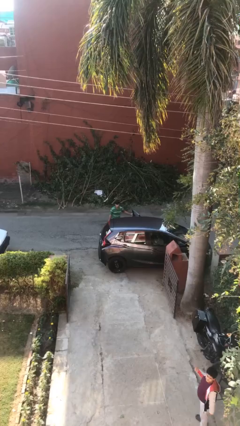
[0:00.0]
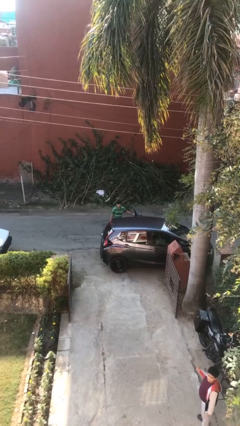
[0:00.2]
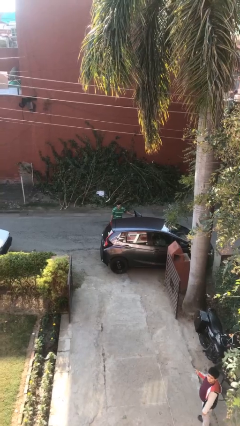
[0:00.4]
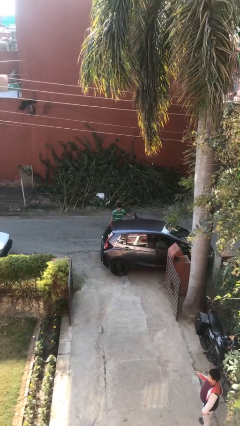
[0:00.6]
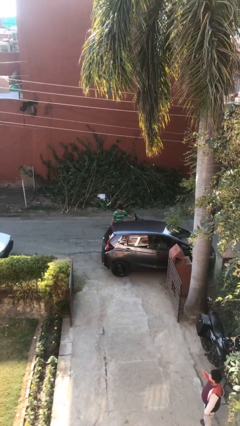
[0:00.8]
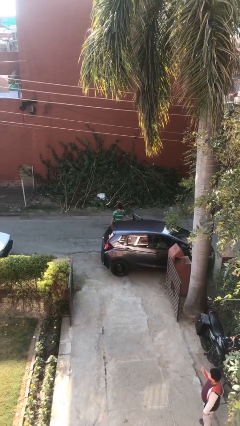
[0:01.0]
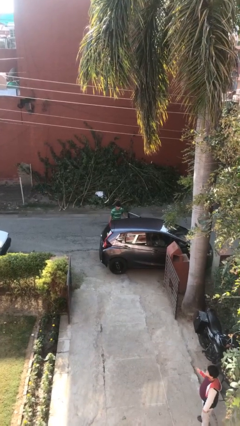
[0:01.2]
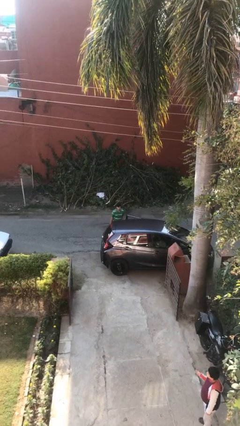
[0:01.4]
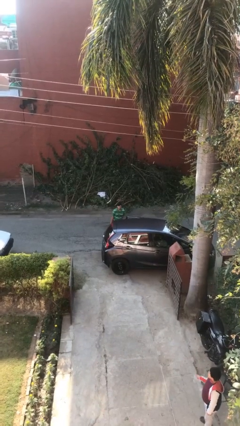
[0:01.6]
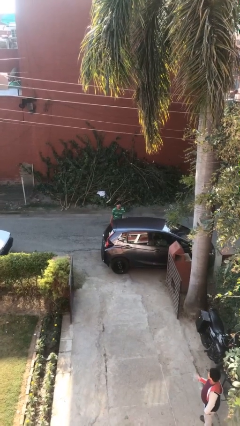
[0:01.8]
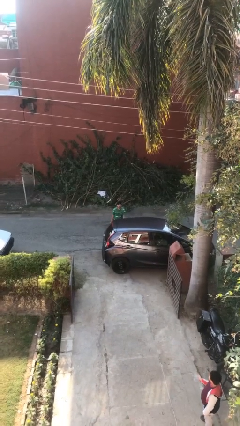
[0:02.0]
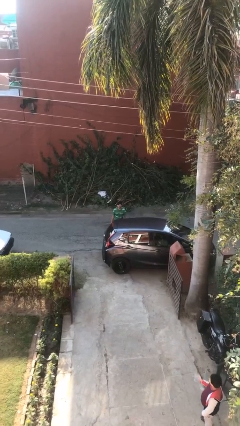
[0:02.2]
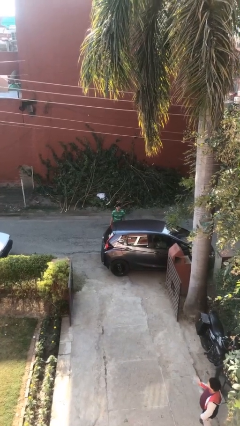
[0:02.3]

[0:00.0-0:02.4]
person closes car door

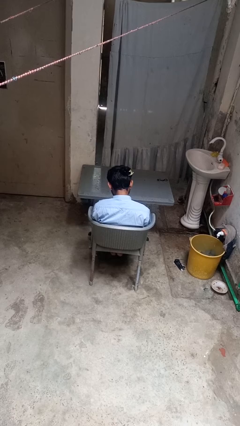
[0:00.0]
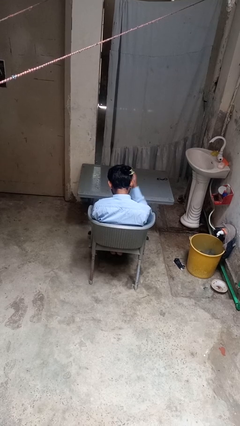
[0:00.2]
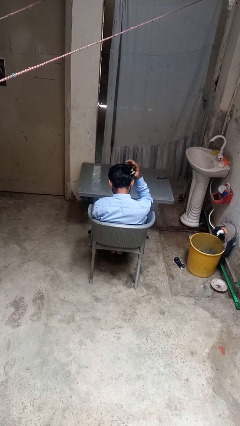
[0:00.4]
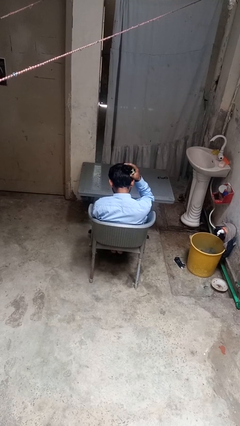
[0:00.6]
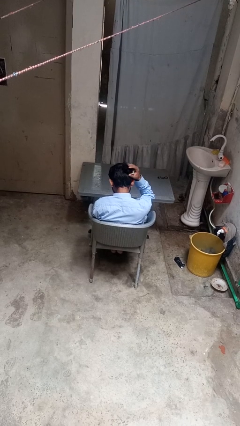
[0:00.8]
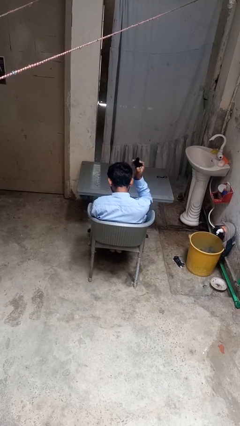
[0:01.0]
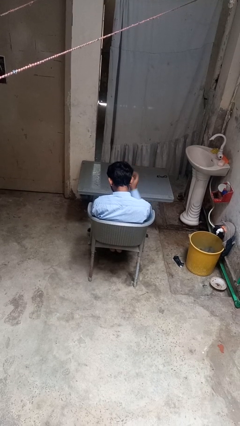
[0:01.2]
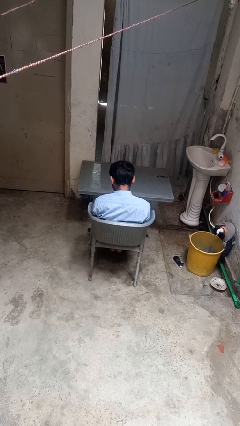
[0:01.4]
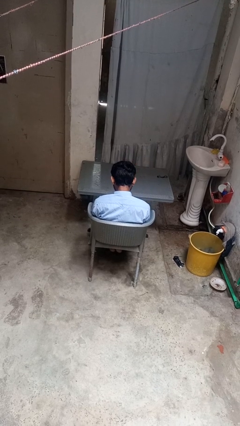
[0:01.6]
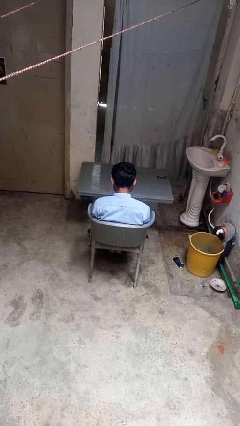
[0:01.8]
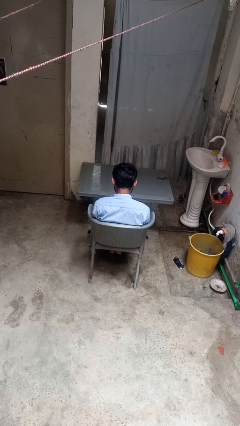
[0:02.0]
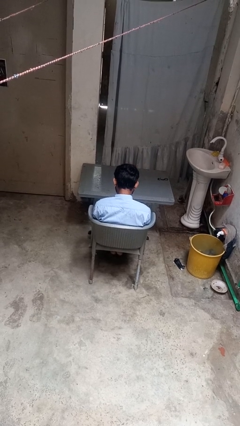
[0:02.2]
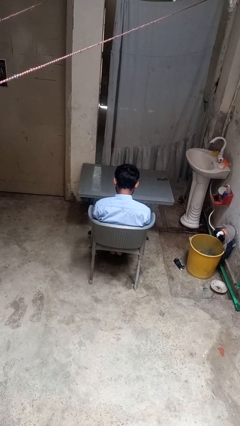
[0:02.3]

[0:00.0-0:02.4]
person takes off hairtie

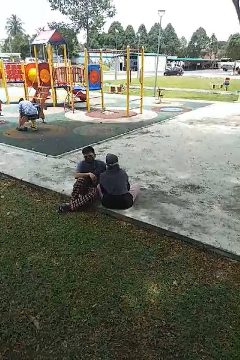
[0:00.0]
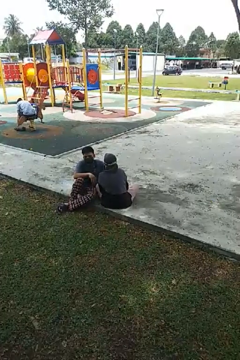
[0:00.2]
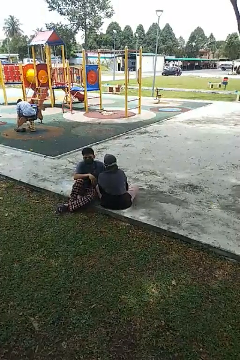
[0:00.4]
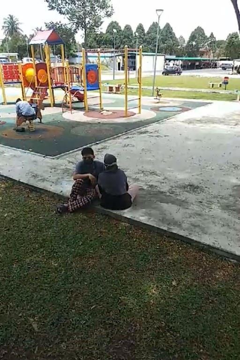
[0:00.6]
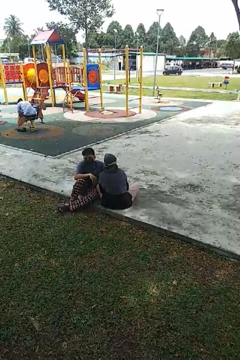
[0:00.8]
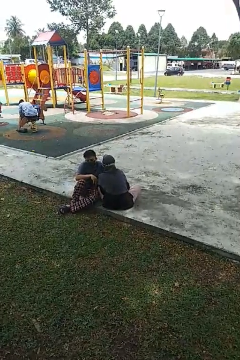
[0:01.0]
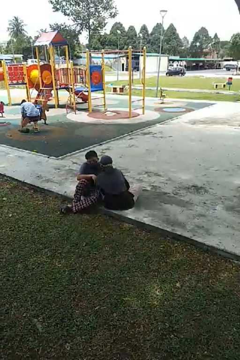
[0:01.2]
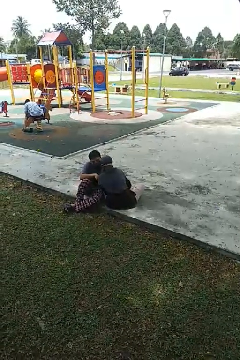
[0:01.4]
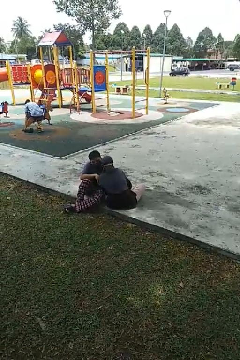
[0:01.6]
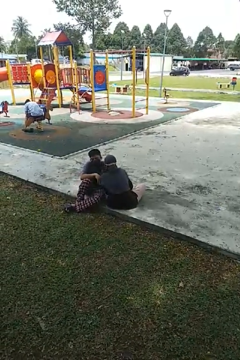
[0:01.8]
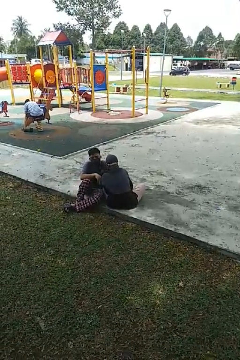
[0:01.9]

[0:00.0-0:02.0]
person kisses cheek of person

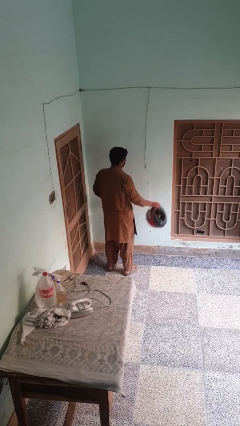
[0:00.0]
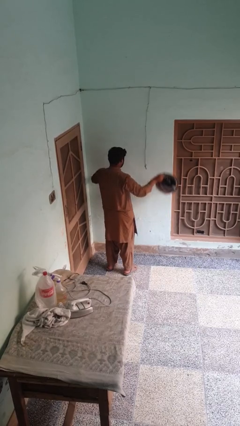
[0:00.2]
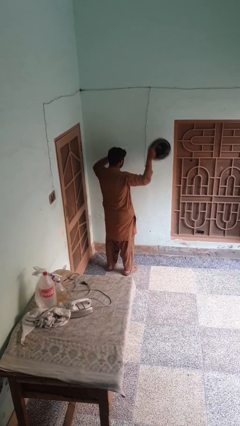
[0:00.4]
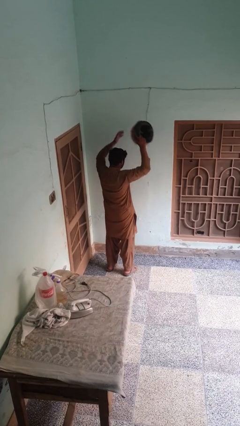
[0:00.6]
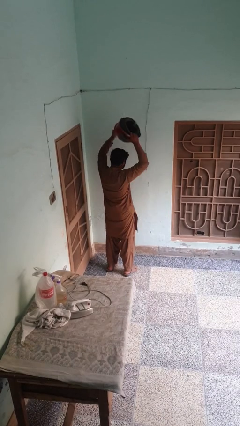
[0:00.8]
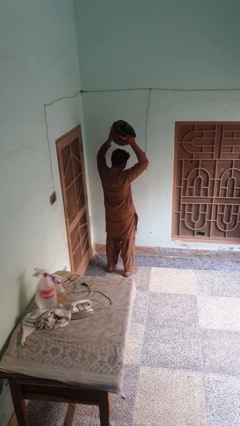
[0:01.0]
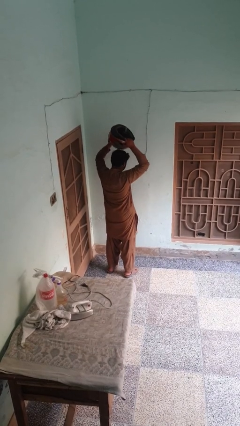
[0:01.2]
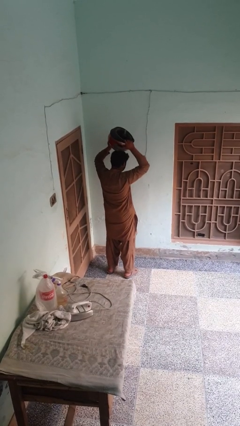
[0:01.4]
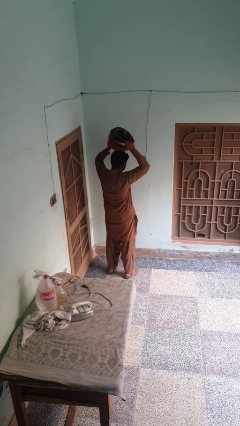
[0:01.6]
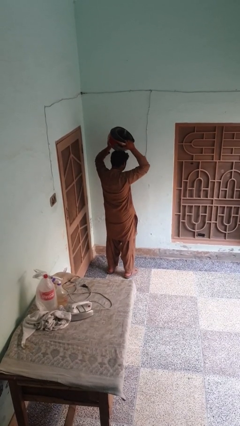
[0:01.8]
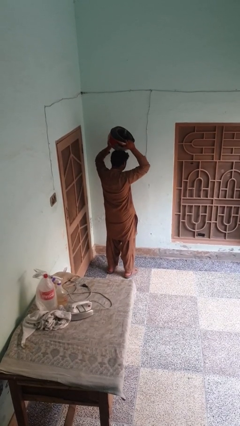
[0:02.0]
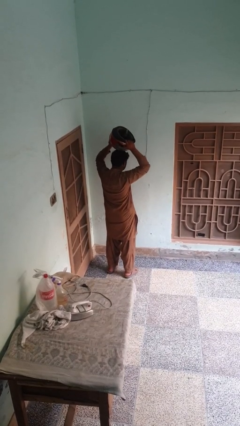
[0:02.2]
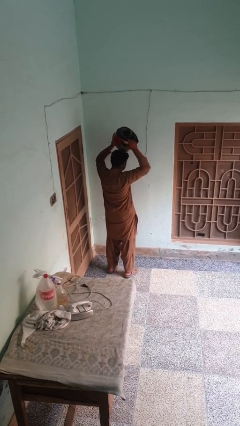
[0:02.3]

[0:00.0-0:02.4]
person holds object above head

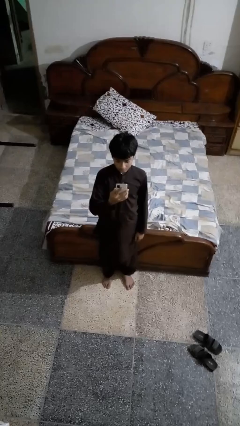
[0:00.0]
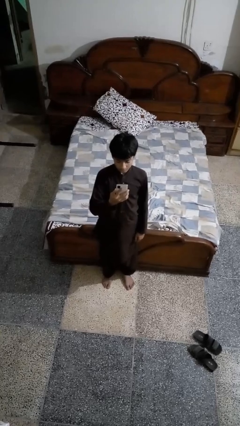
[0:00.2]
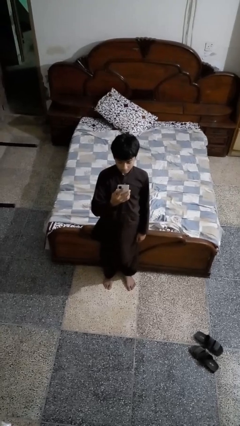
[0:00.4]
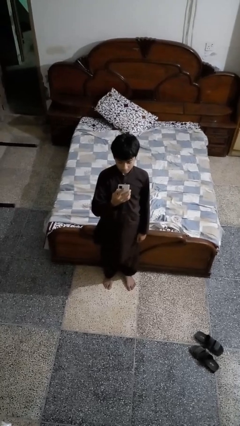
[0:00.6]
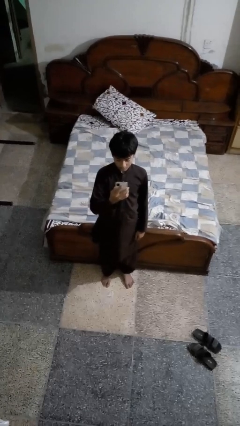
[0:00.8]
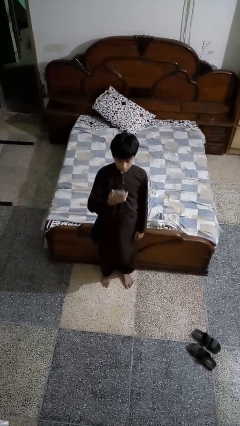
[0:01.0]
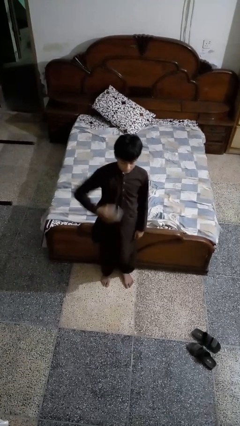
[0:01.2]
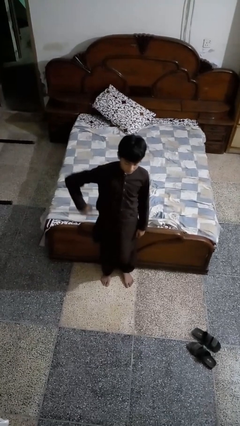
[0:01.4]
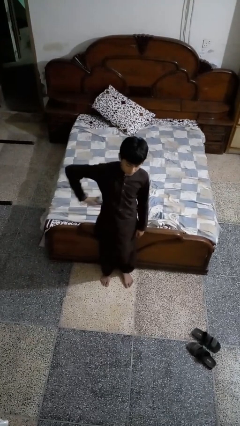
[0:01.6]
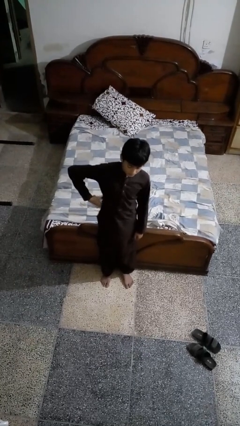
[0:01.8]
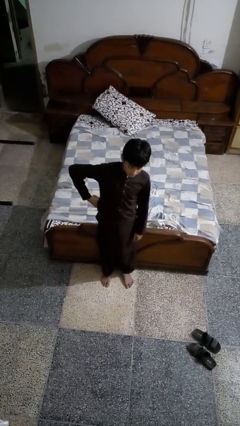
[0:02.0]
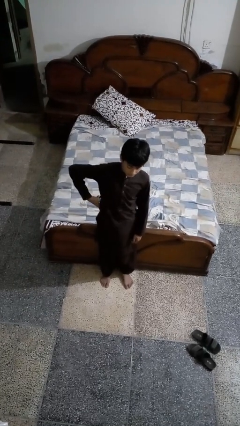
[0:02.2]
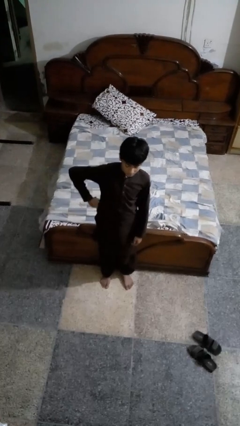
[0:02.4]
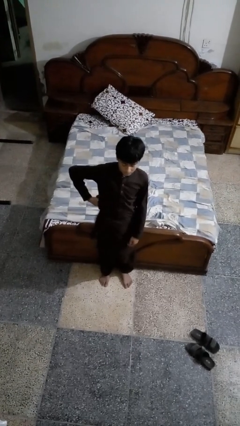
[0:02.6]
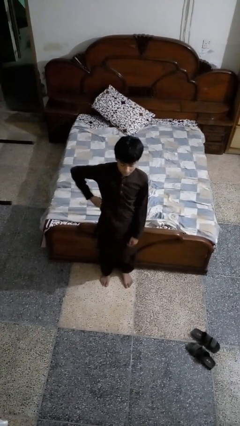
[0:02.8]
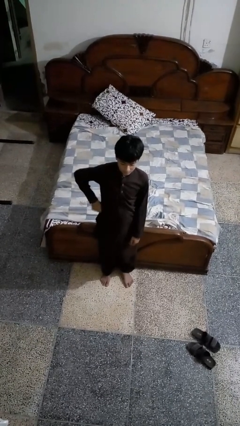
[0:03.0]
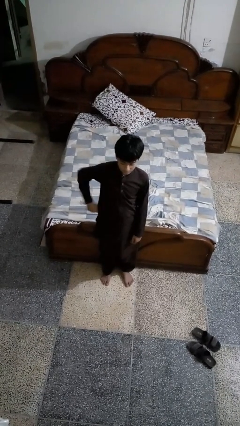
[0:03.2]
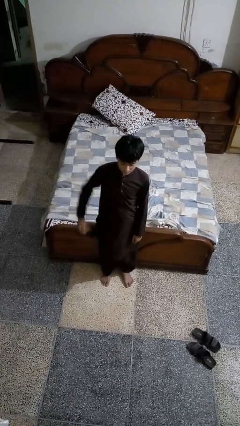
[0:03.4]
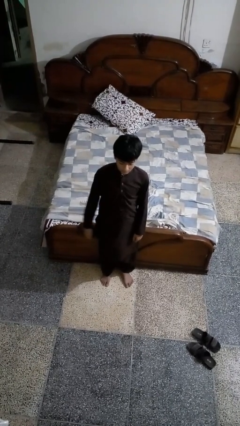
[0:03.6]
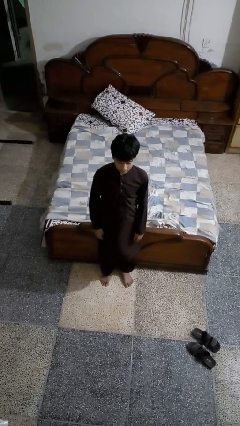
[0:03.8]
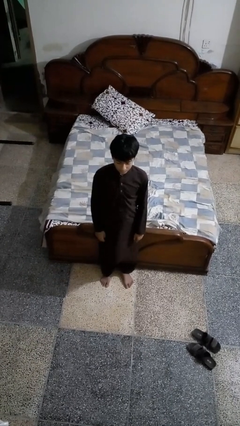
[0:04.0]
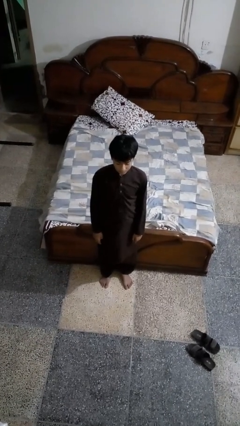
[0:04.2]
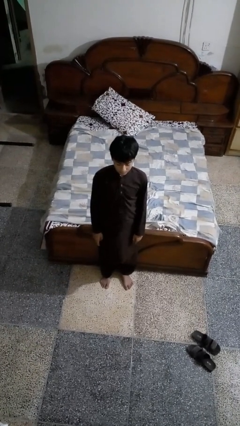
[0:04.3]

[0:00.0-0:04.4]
person puts phone into pocket

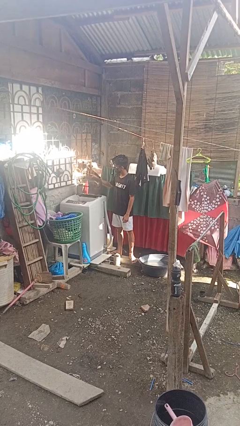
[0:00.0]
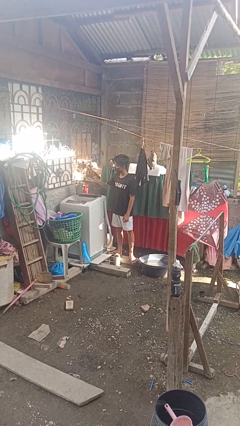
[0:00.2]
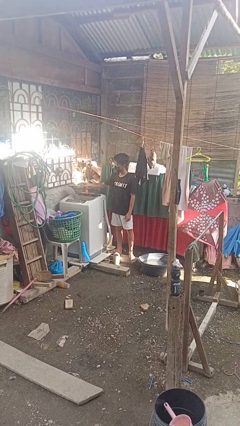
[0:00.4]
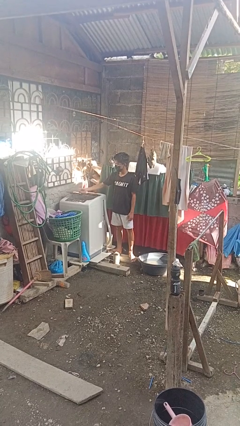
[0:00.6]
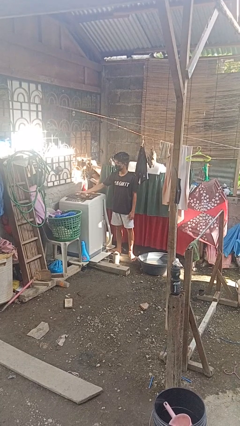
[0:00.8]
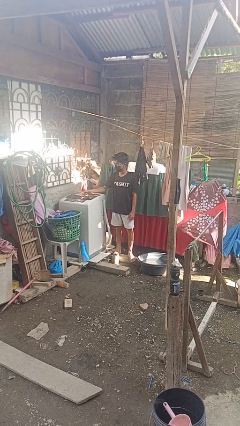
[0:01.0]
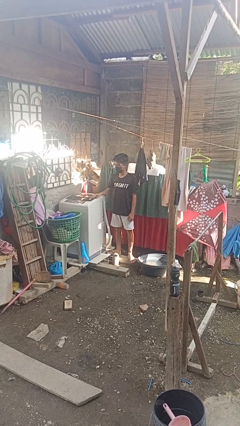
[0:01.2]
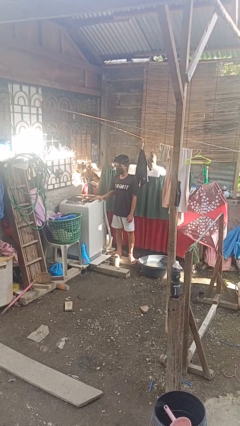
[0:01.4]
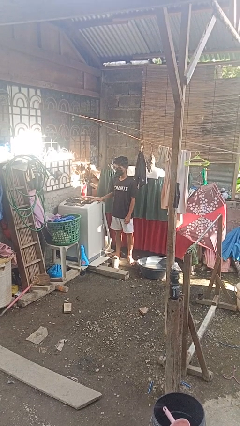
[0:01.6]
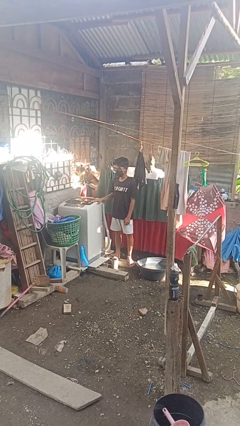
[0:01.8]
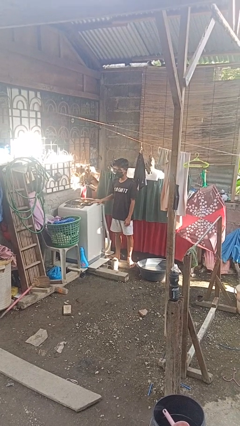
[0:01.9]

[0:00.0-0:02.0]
person closes clothes washer

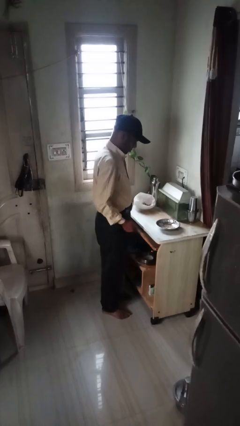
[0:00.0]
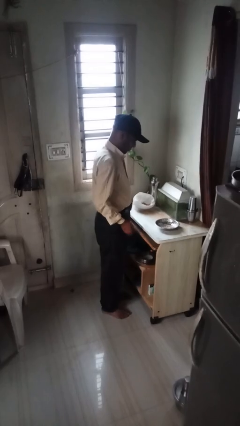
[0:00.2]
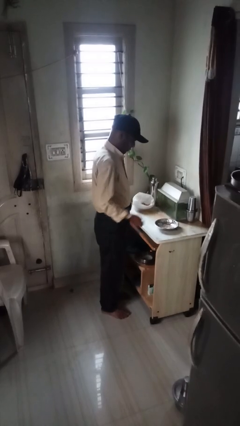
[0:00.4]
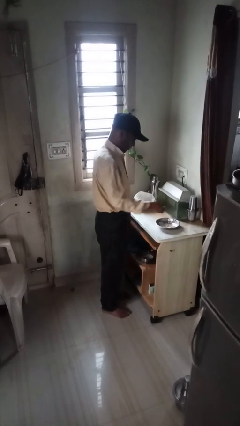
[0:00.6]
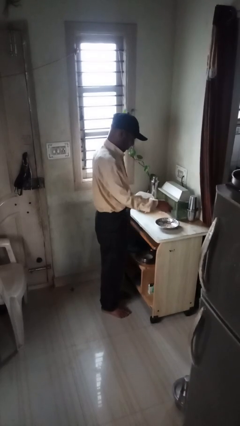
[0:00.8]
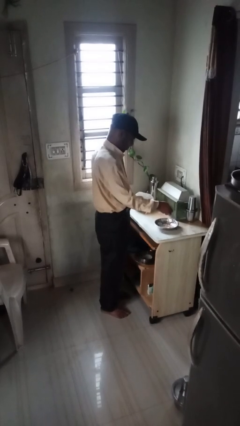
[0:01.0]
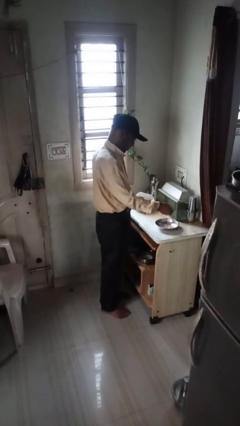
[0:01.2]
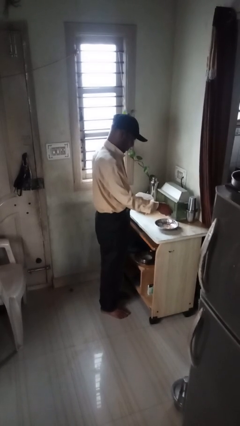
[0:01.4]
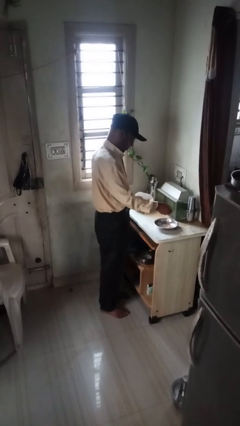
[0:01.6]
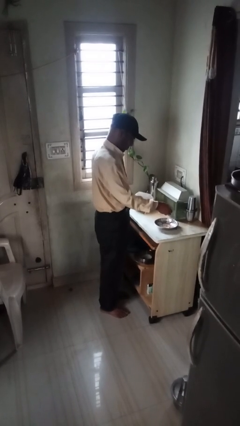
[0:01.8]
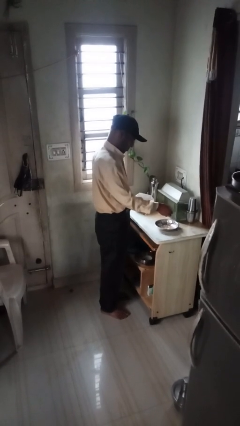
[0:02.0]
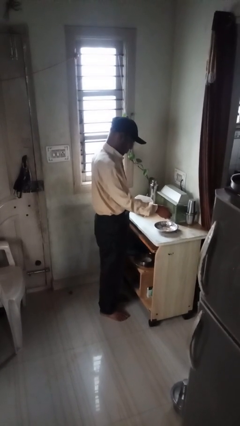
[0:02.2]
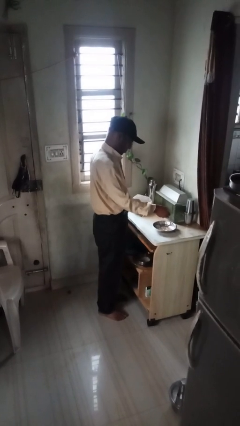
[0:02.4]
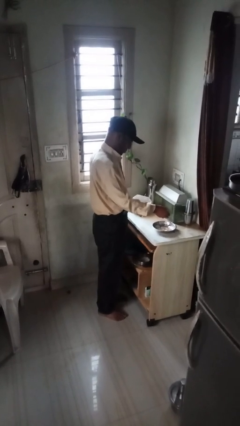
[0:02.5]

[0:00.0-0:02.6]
person pours into bowl
